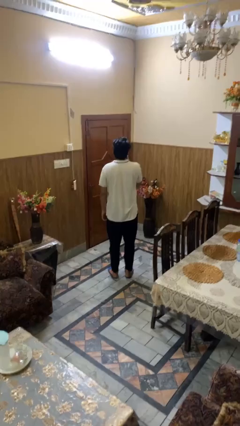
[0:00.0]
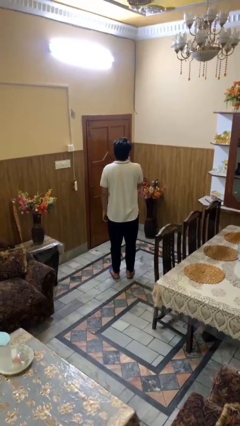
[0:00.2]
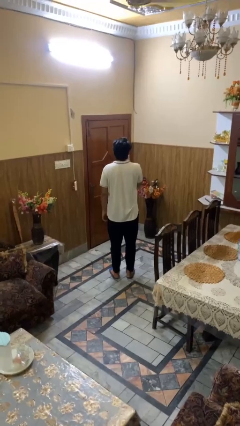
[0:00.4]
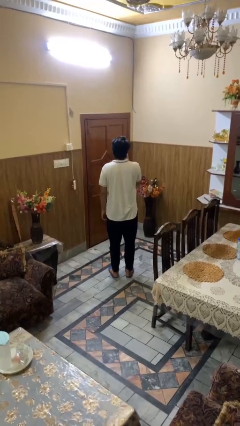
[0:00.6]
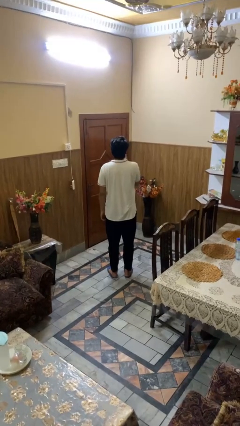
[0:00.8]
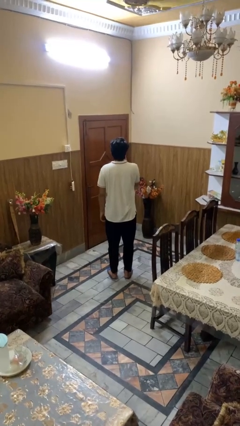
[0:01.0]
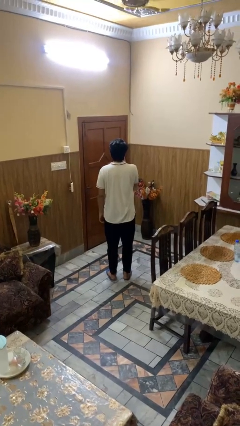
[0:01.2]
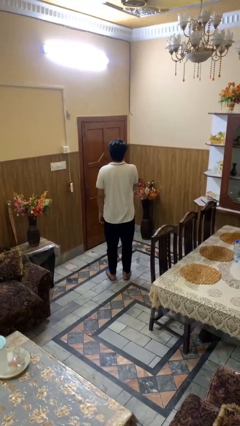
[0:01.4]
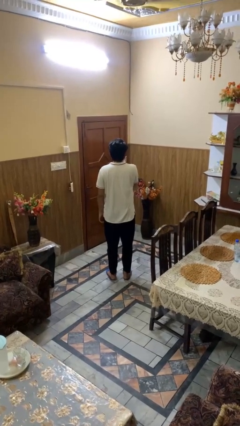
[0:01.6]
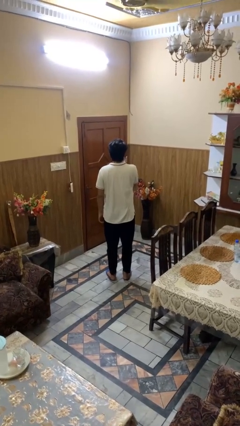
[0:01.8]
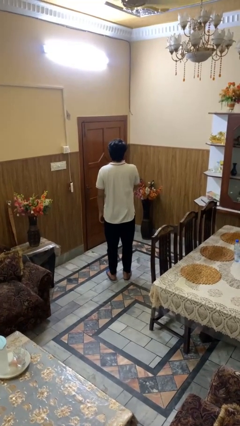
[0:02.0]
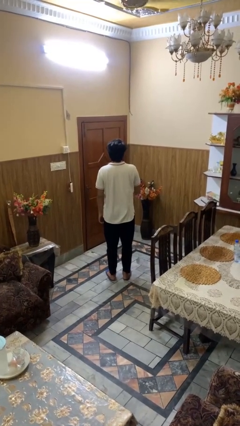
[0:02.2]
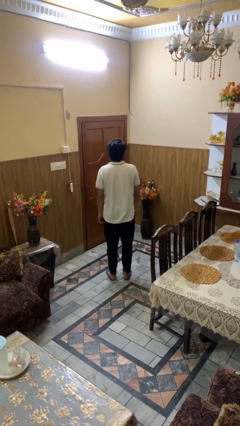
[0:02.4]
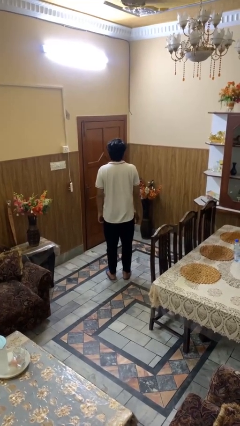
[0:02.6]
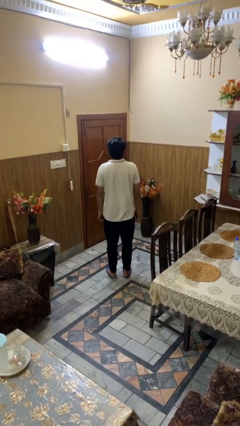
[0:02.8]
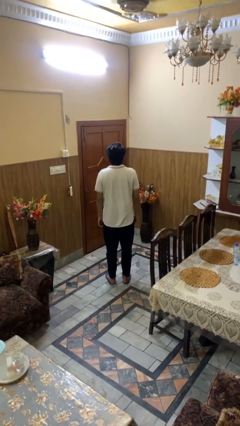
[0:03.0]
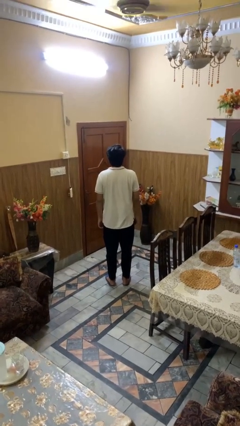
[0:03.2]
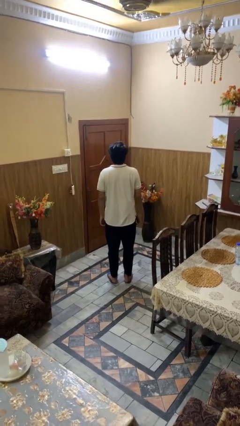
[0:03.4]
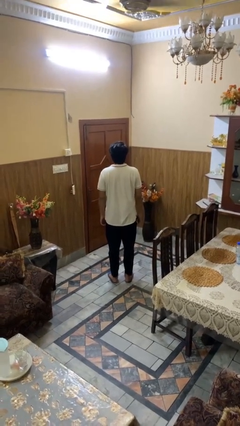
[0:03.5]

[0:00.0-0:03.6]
person licks fingers

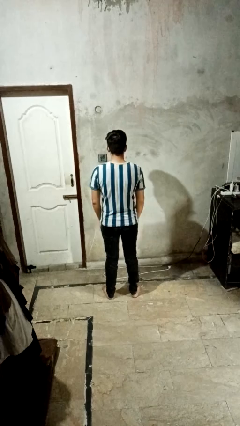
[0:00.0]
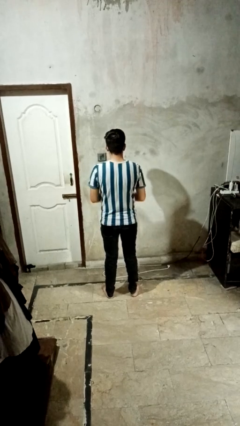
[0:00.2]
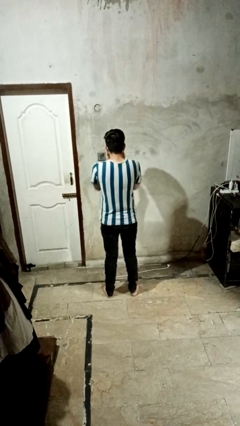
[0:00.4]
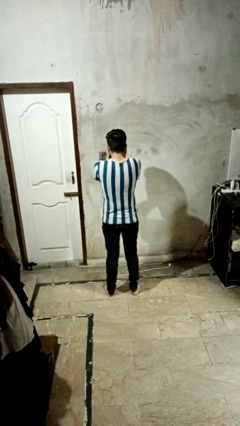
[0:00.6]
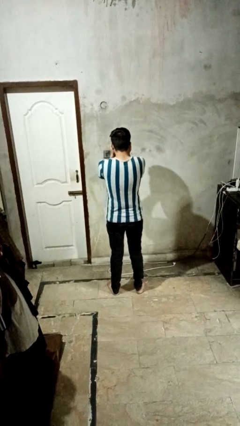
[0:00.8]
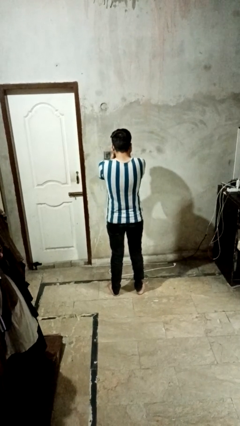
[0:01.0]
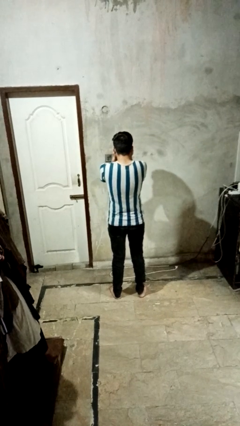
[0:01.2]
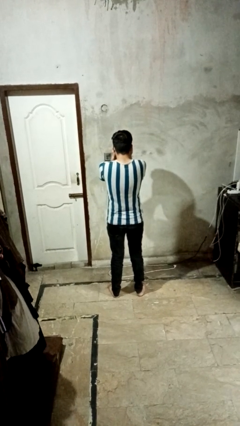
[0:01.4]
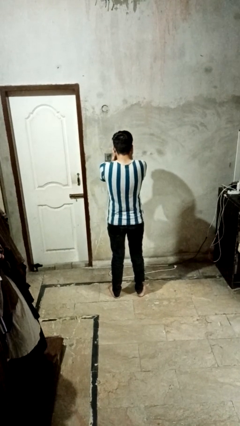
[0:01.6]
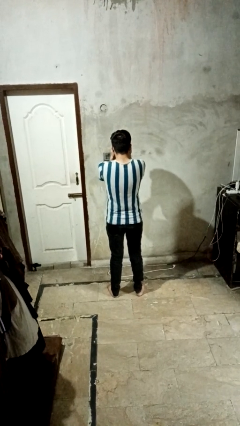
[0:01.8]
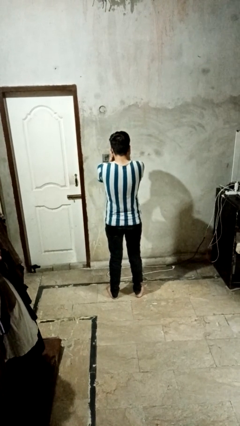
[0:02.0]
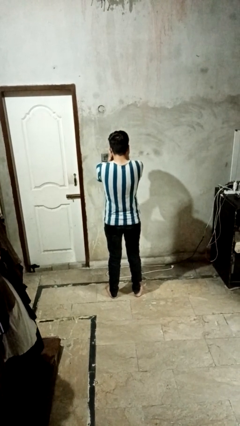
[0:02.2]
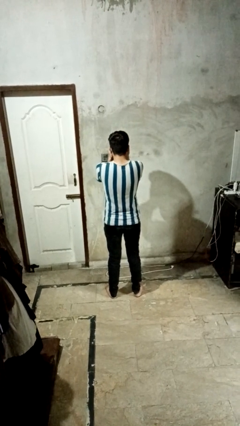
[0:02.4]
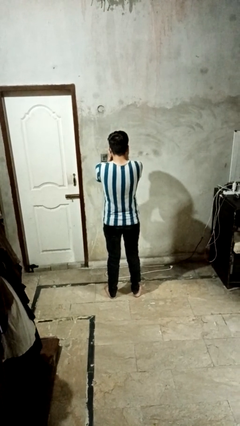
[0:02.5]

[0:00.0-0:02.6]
person covers face with hands

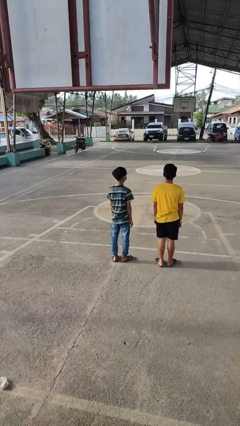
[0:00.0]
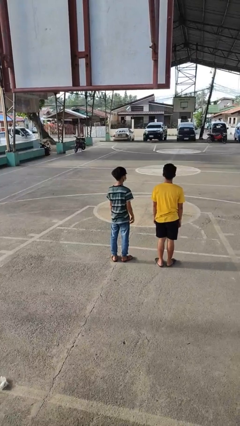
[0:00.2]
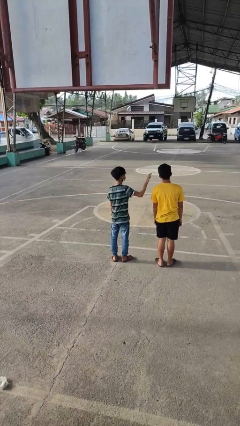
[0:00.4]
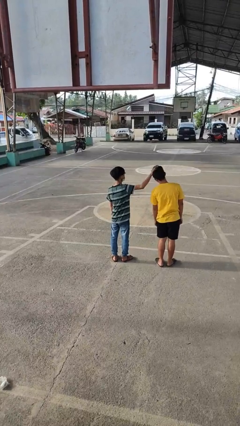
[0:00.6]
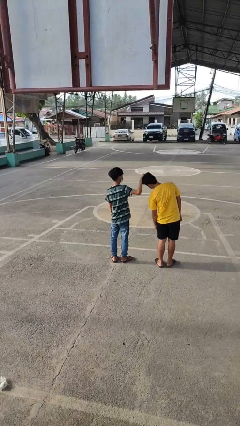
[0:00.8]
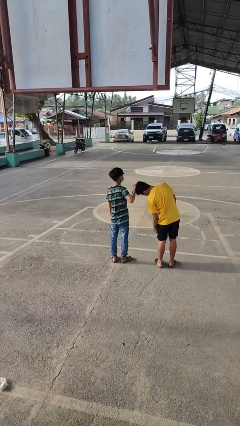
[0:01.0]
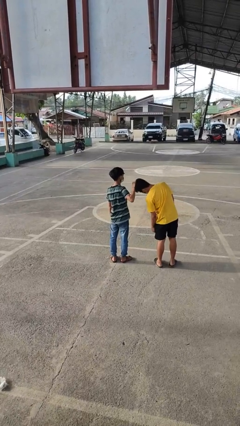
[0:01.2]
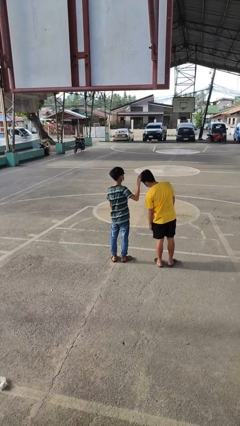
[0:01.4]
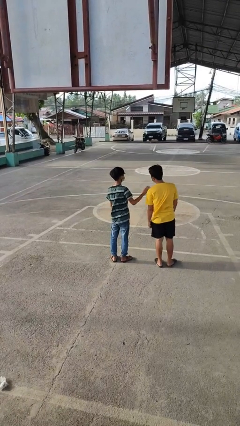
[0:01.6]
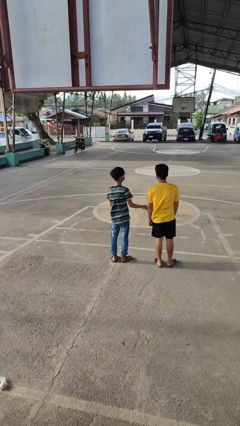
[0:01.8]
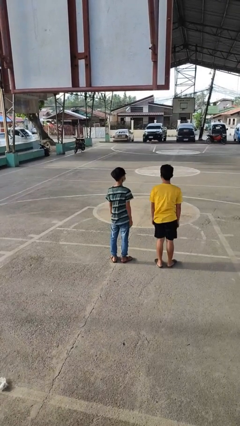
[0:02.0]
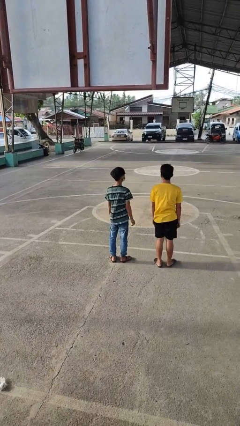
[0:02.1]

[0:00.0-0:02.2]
person grabs person by hair

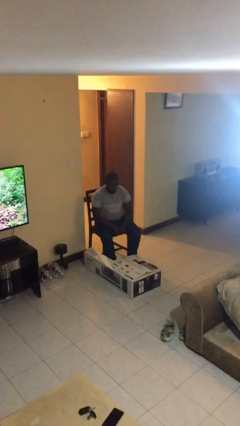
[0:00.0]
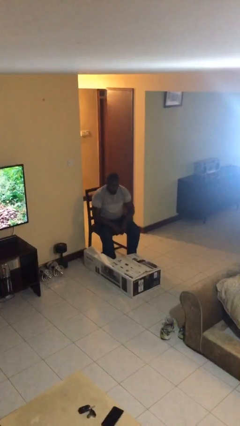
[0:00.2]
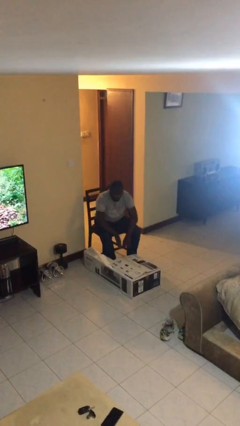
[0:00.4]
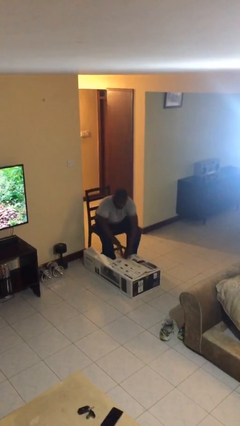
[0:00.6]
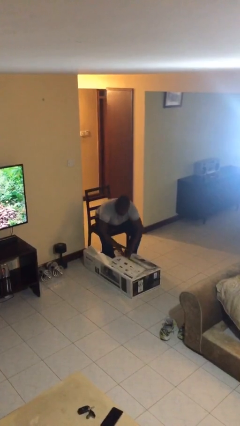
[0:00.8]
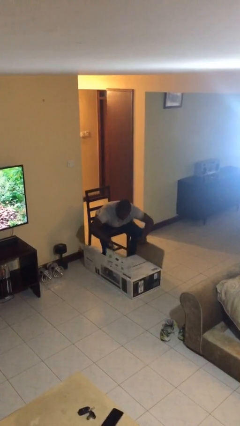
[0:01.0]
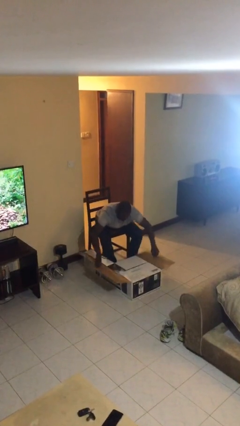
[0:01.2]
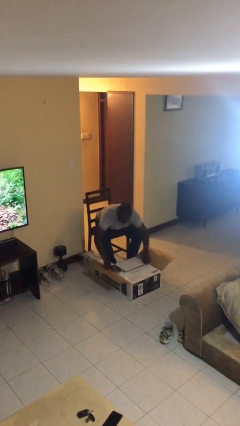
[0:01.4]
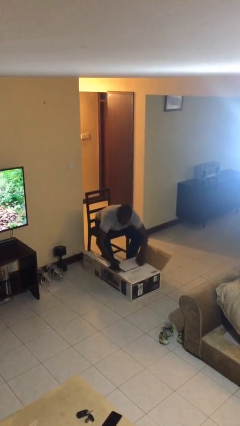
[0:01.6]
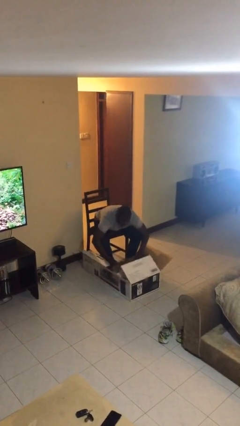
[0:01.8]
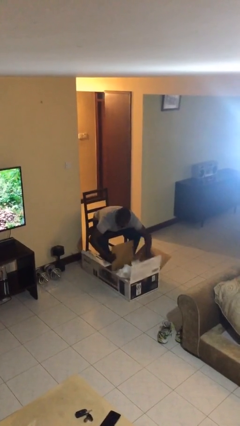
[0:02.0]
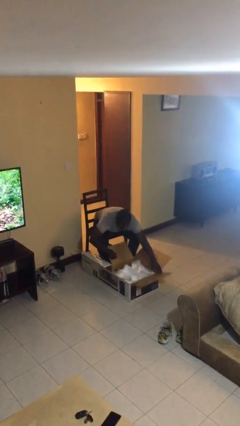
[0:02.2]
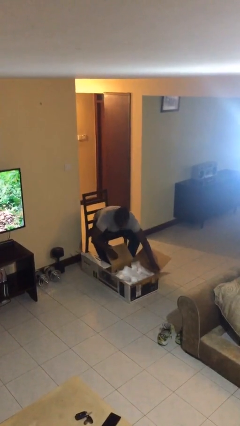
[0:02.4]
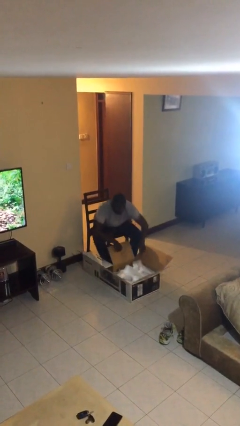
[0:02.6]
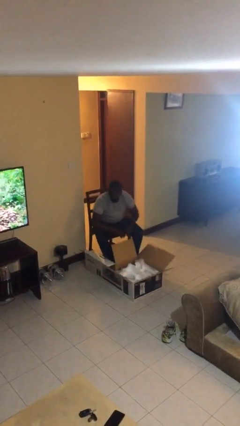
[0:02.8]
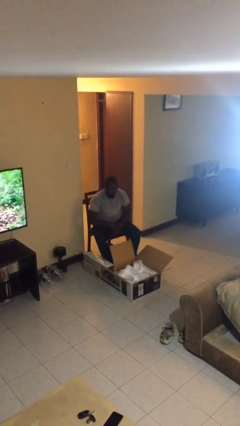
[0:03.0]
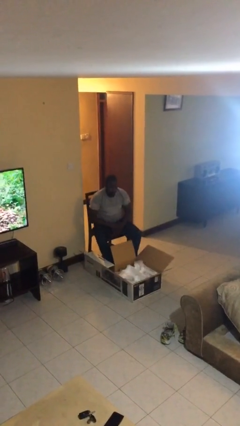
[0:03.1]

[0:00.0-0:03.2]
person opens box

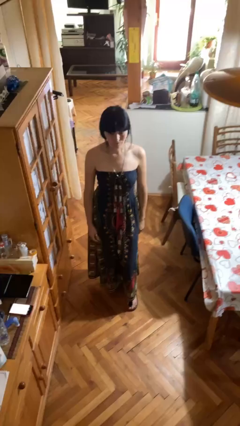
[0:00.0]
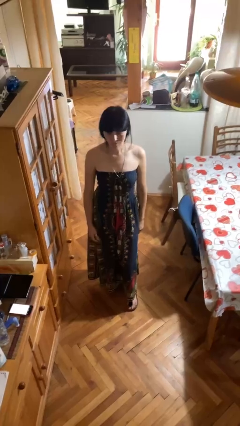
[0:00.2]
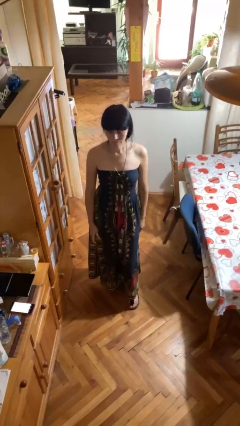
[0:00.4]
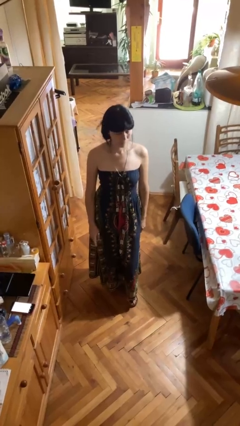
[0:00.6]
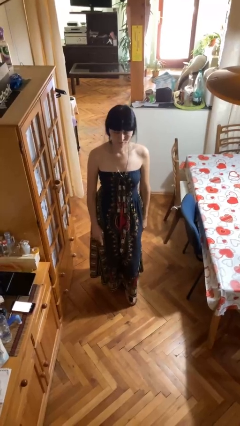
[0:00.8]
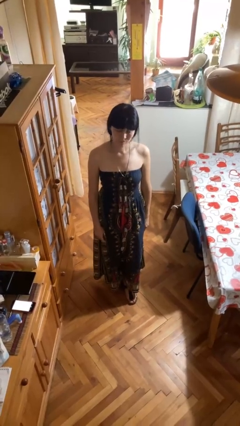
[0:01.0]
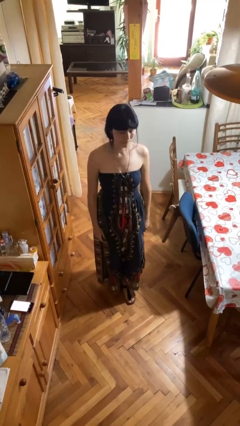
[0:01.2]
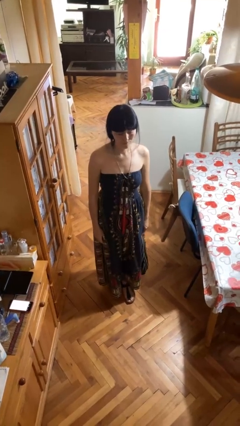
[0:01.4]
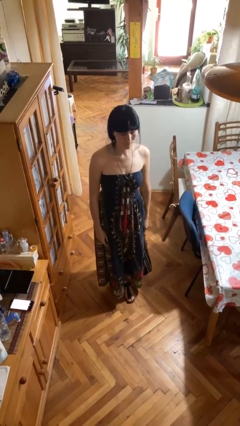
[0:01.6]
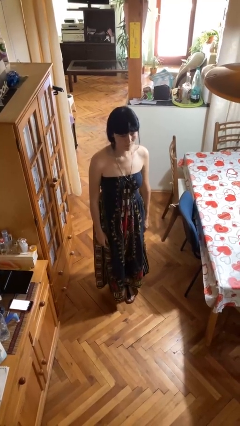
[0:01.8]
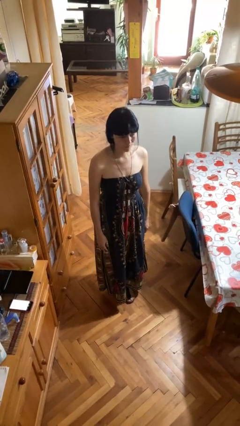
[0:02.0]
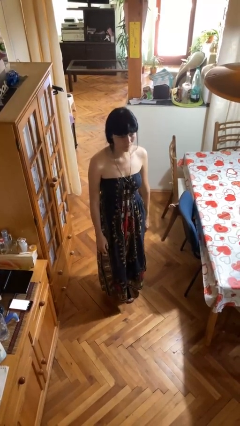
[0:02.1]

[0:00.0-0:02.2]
person shakes head

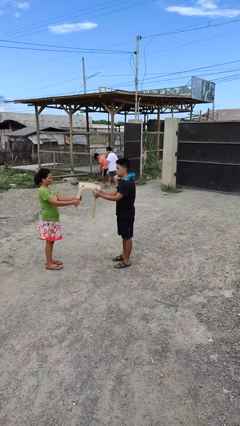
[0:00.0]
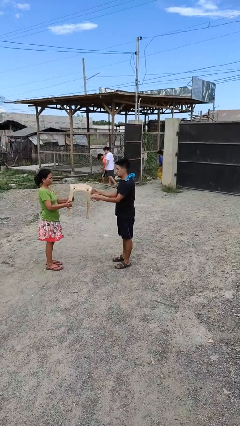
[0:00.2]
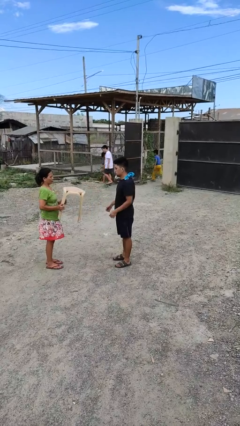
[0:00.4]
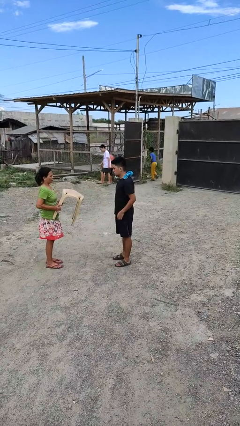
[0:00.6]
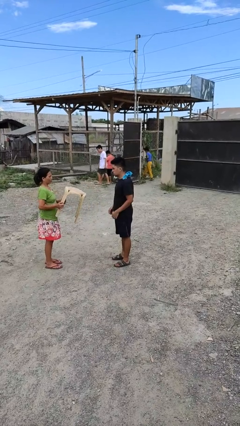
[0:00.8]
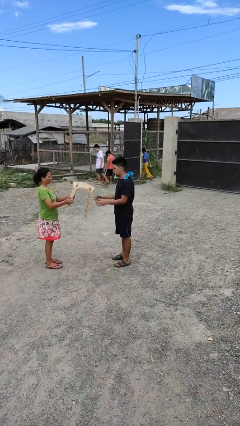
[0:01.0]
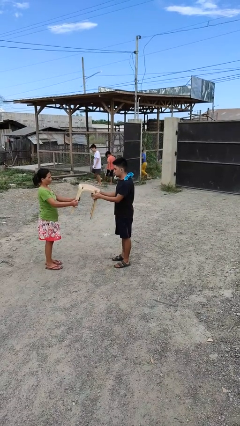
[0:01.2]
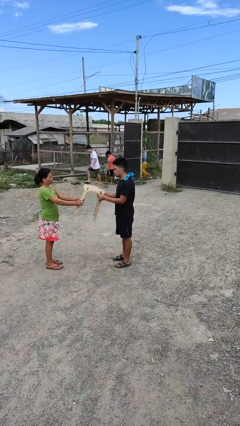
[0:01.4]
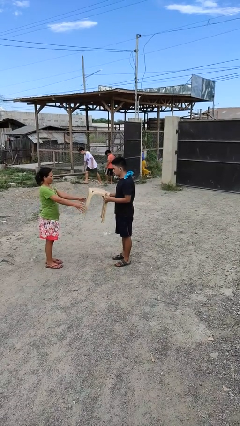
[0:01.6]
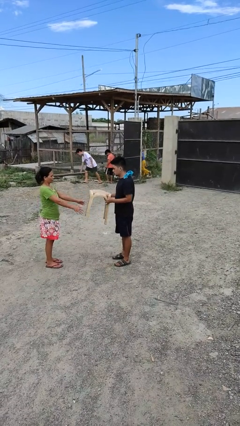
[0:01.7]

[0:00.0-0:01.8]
person transfers object to person

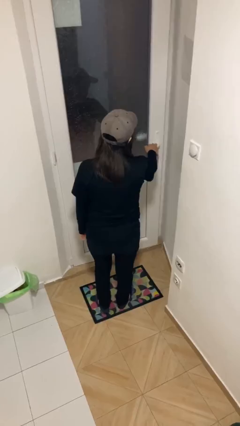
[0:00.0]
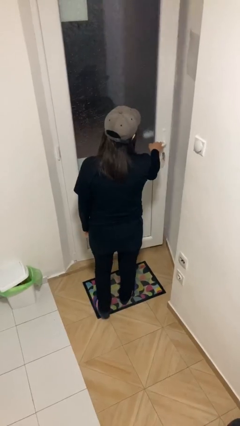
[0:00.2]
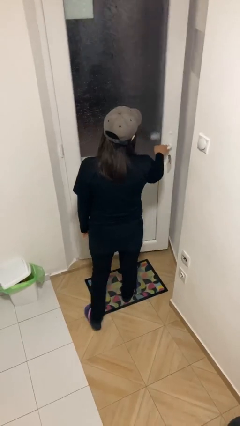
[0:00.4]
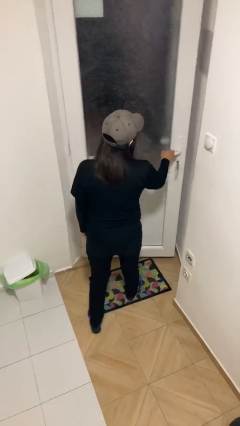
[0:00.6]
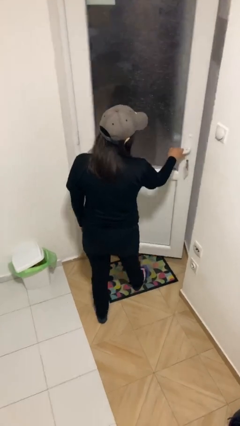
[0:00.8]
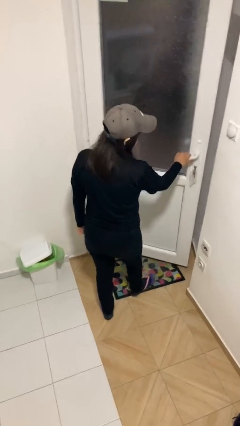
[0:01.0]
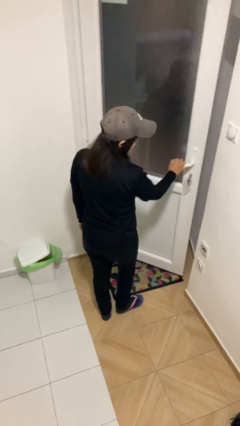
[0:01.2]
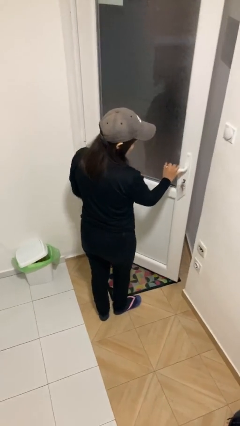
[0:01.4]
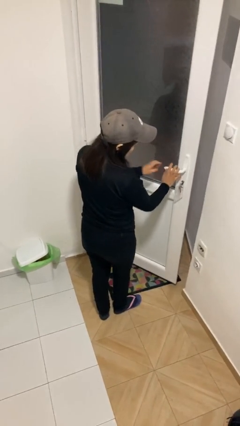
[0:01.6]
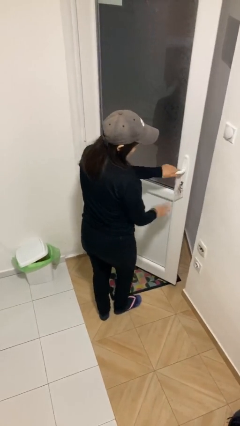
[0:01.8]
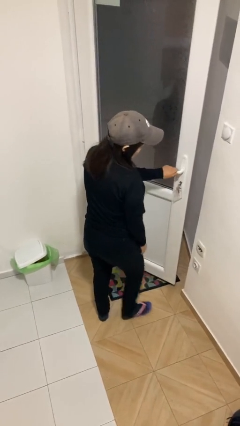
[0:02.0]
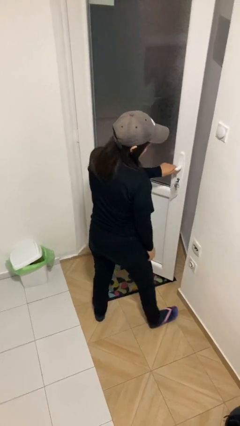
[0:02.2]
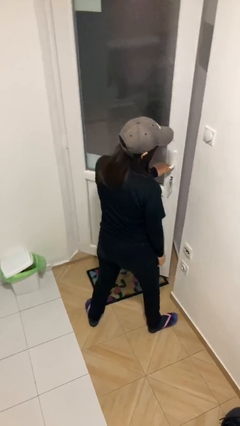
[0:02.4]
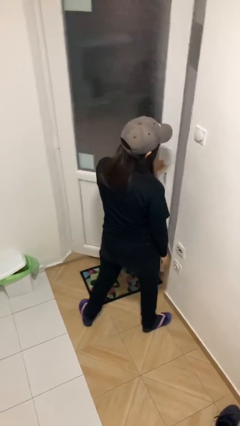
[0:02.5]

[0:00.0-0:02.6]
person opens facility door
